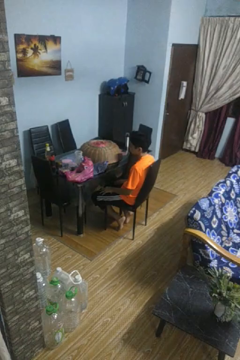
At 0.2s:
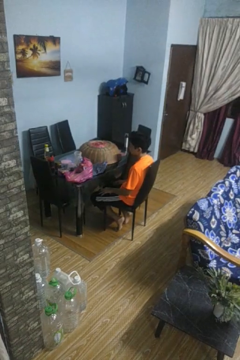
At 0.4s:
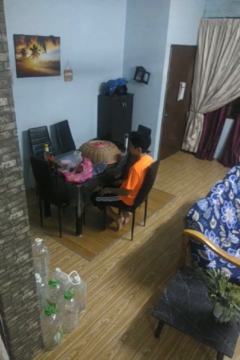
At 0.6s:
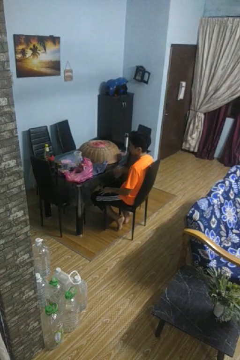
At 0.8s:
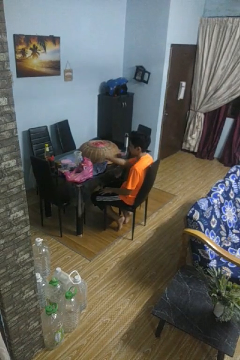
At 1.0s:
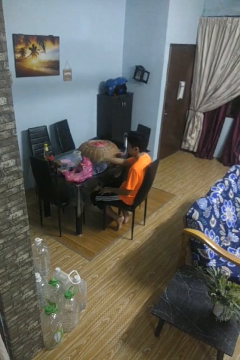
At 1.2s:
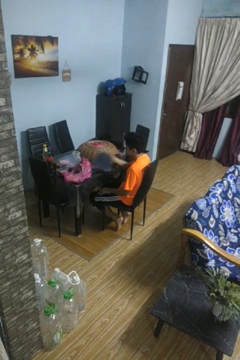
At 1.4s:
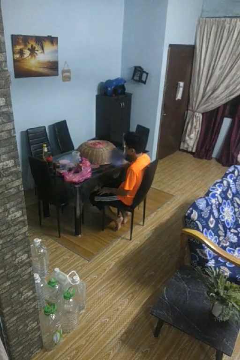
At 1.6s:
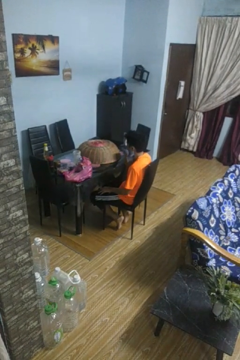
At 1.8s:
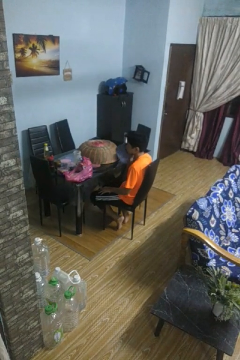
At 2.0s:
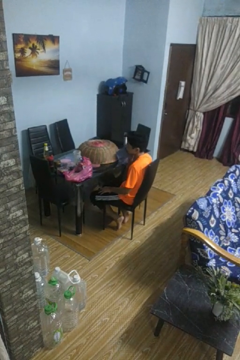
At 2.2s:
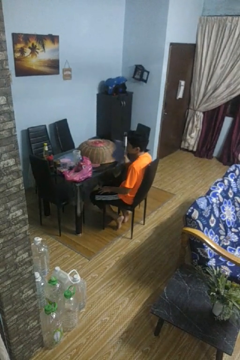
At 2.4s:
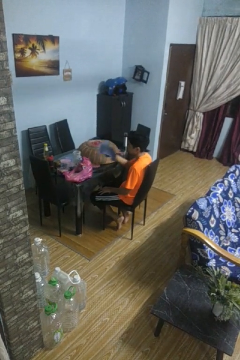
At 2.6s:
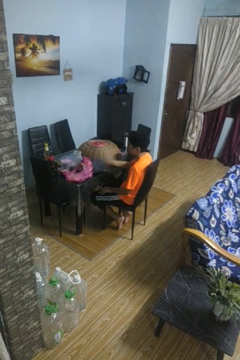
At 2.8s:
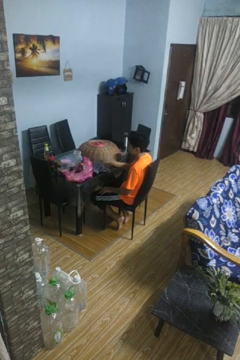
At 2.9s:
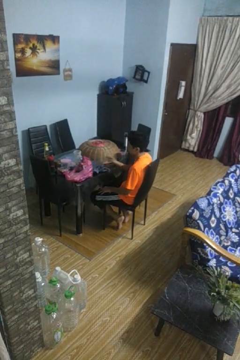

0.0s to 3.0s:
person wipes mouth with napkin

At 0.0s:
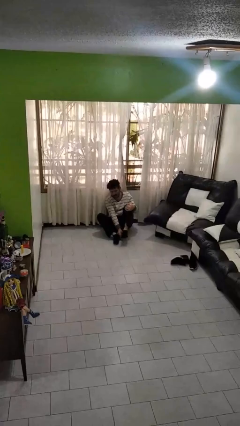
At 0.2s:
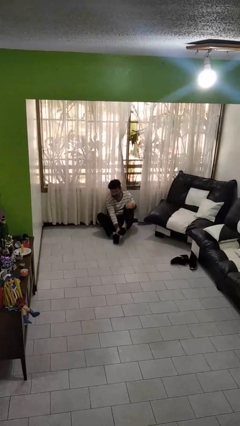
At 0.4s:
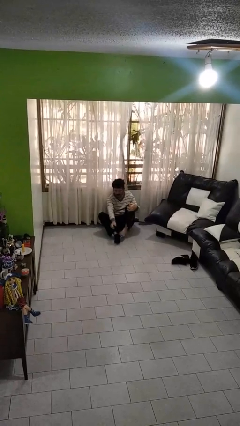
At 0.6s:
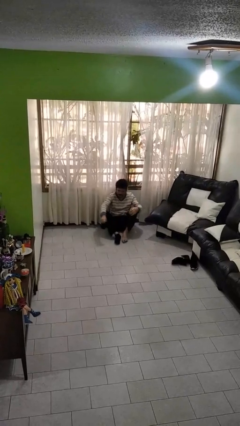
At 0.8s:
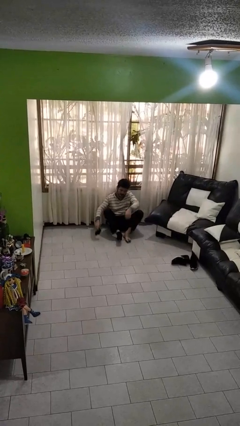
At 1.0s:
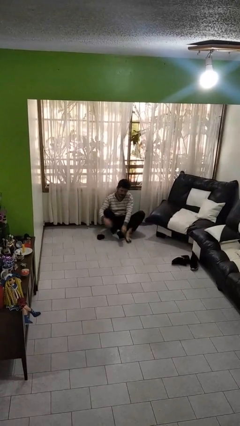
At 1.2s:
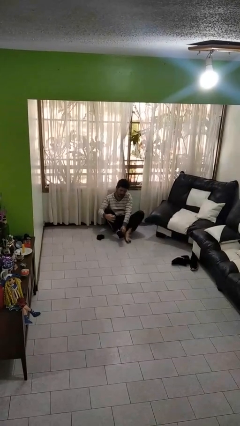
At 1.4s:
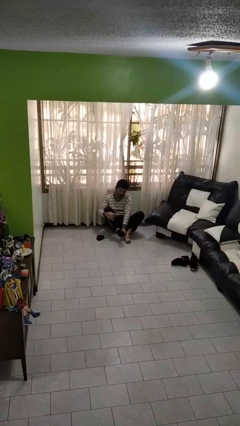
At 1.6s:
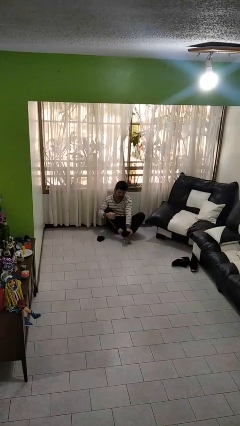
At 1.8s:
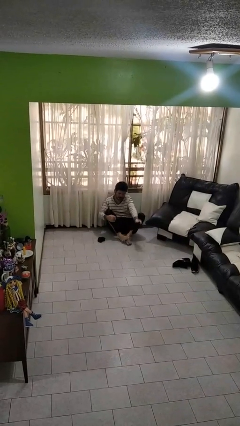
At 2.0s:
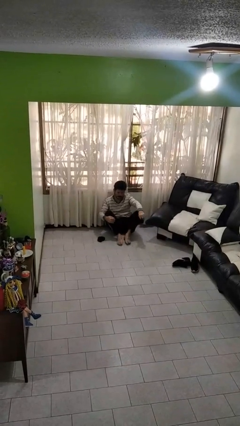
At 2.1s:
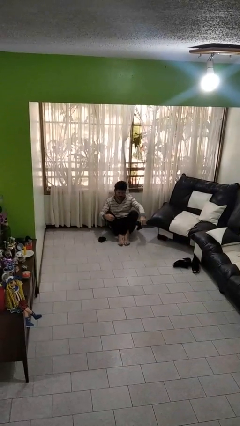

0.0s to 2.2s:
person takes off socks

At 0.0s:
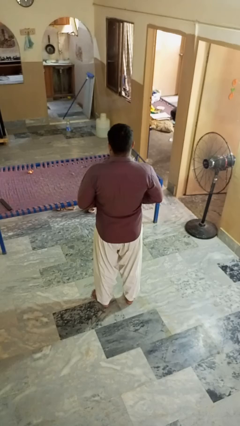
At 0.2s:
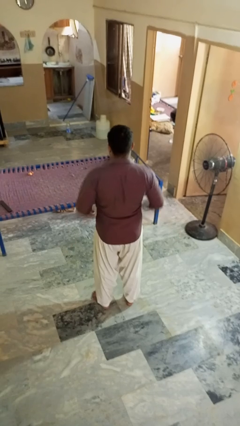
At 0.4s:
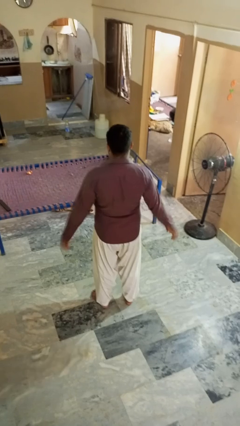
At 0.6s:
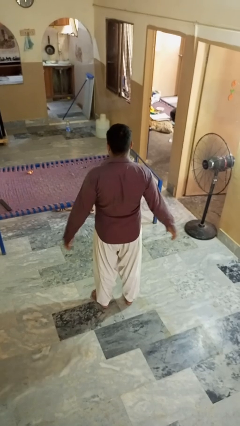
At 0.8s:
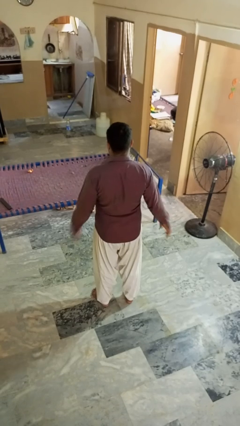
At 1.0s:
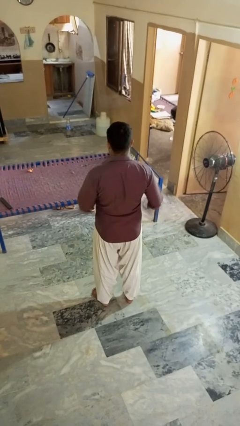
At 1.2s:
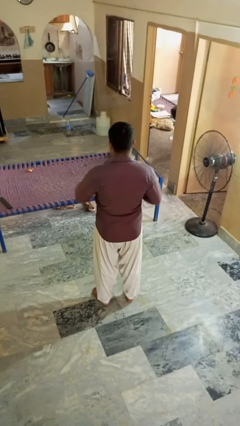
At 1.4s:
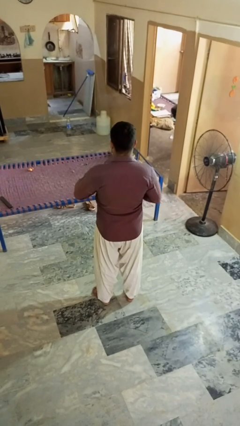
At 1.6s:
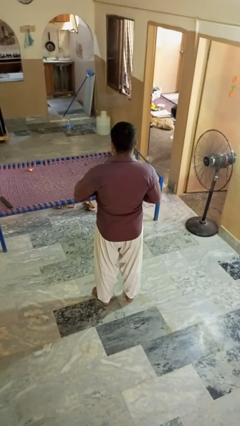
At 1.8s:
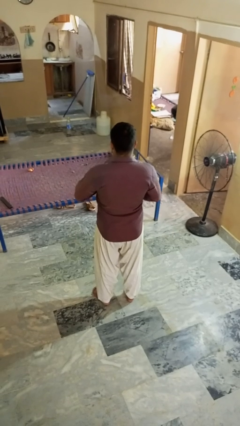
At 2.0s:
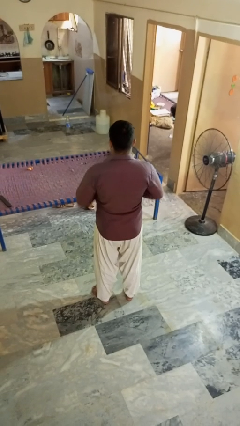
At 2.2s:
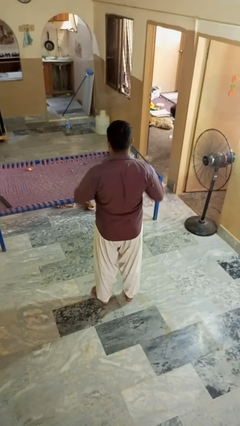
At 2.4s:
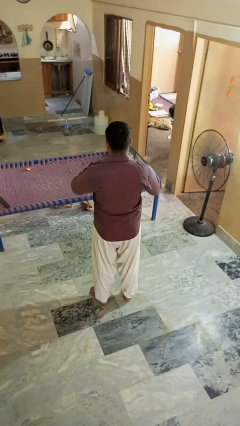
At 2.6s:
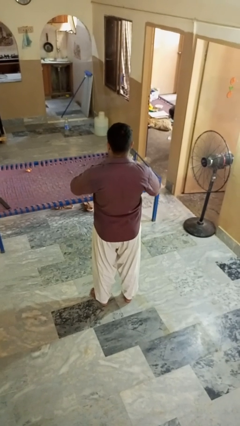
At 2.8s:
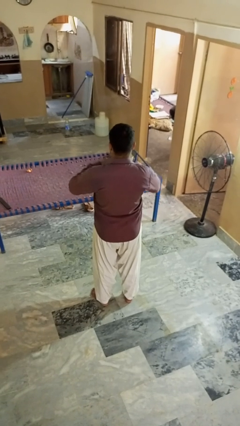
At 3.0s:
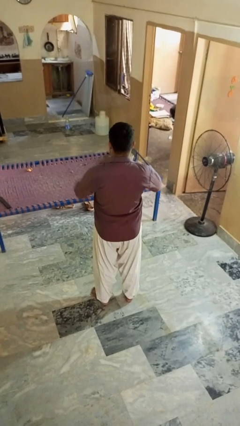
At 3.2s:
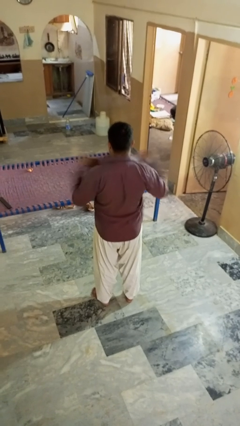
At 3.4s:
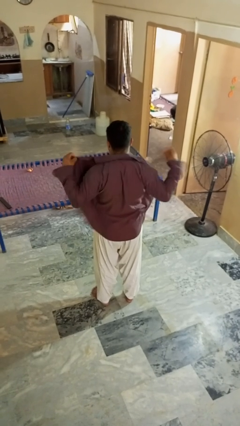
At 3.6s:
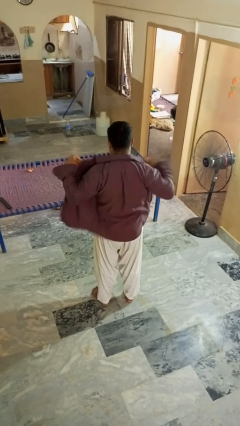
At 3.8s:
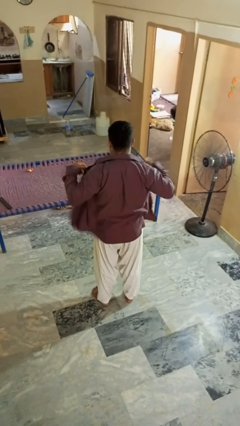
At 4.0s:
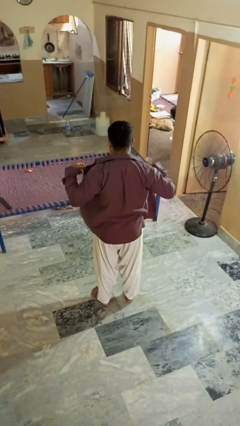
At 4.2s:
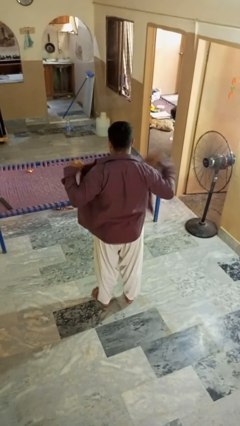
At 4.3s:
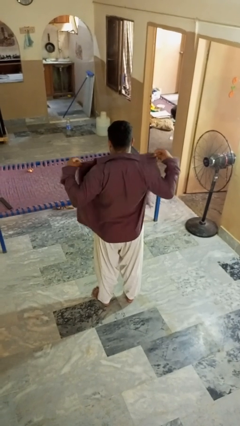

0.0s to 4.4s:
person unbuttons shirt

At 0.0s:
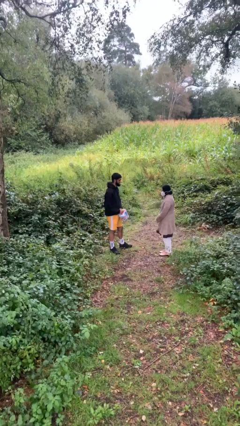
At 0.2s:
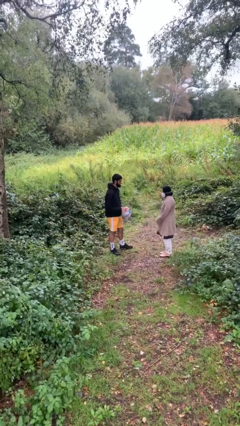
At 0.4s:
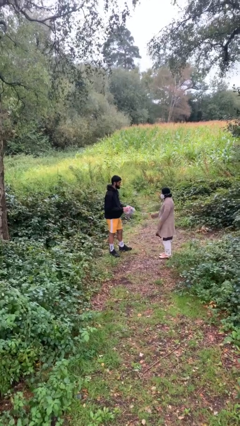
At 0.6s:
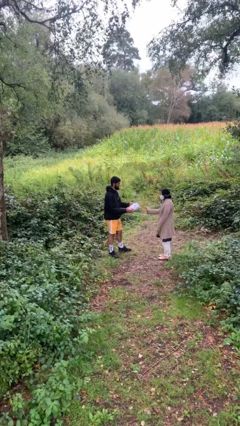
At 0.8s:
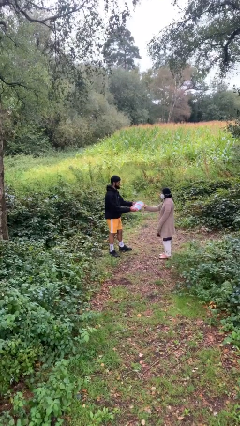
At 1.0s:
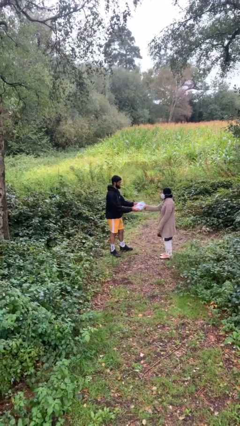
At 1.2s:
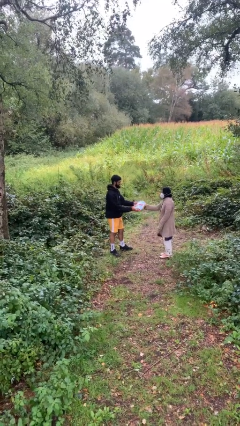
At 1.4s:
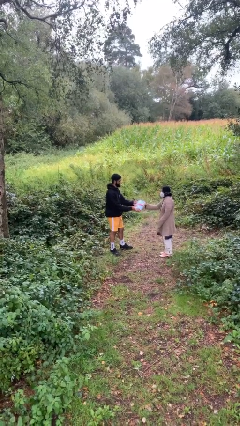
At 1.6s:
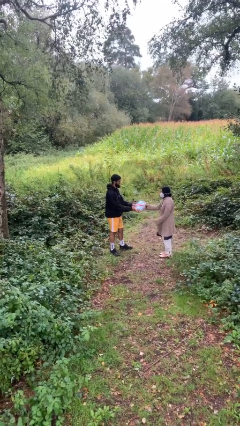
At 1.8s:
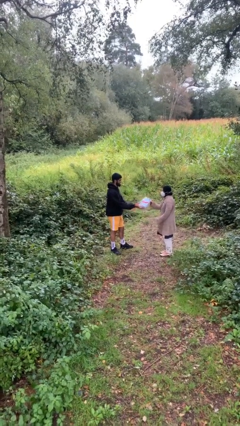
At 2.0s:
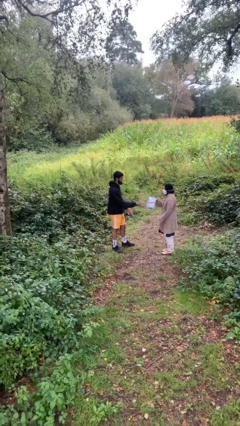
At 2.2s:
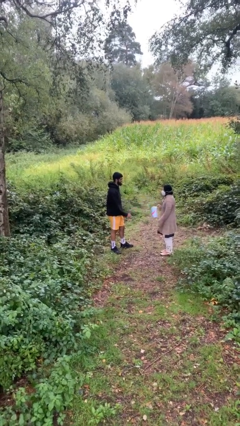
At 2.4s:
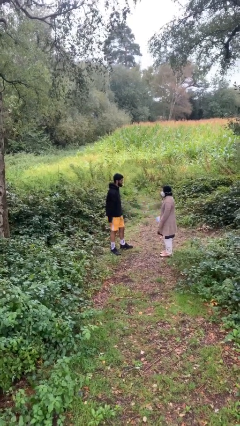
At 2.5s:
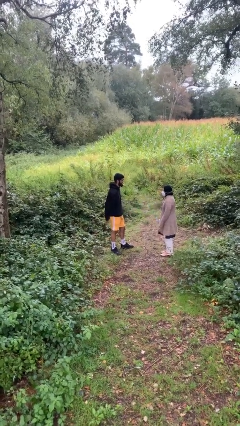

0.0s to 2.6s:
person transfers object to person

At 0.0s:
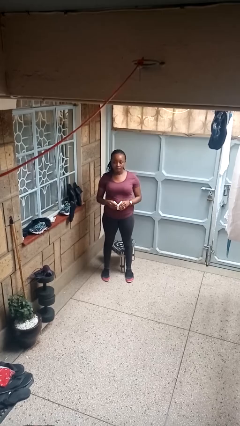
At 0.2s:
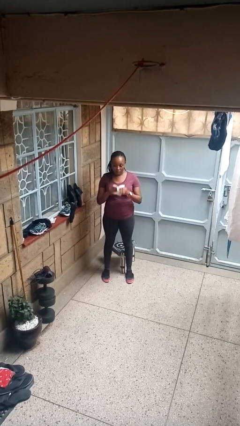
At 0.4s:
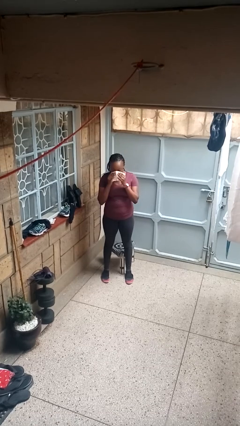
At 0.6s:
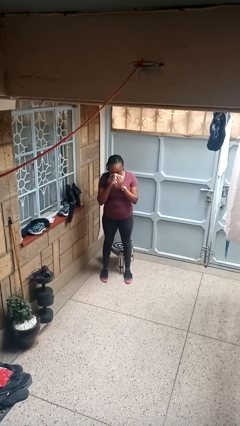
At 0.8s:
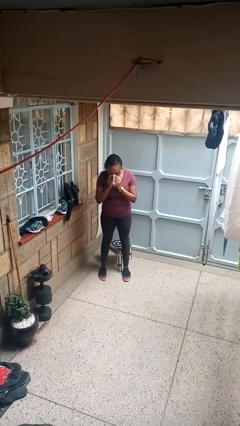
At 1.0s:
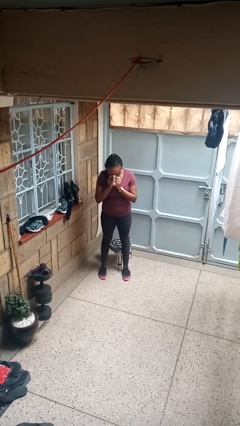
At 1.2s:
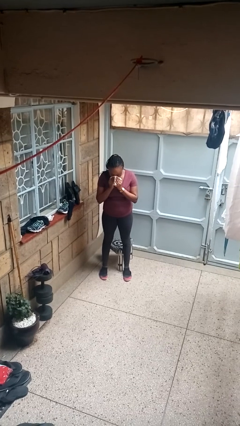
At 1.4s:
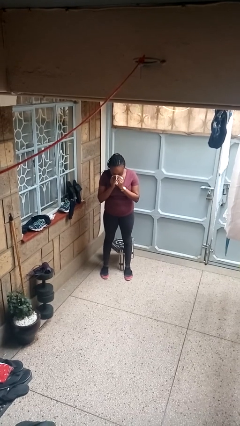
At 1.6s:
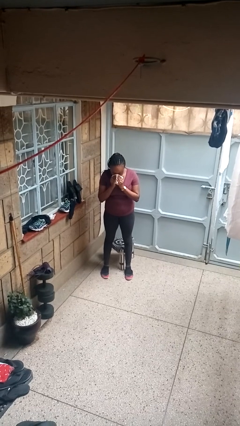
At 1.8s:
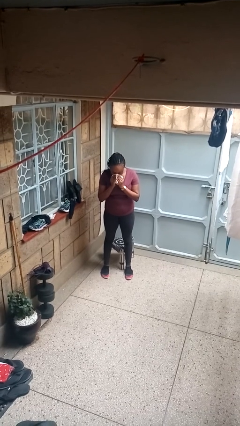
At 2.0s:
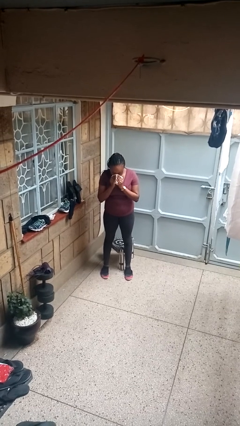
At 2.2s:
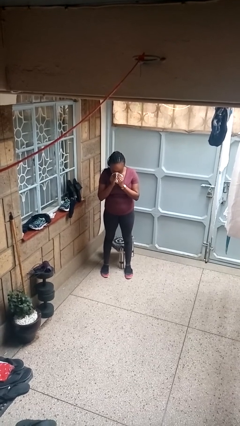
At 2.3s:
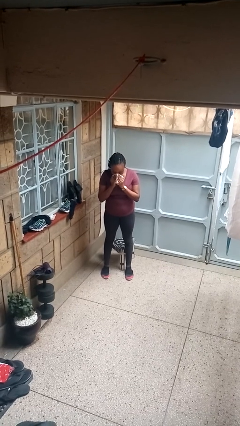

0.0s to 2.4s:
person blows nose

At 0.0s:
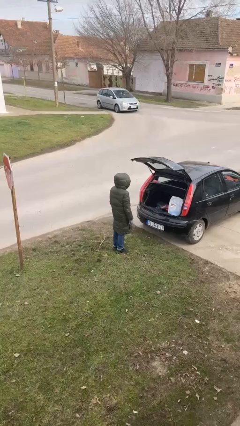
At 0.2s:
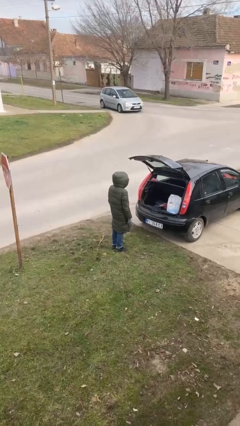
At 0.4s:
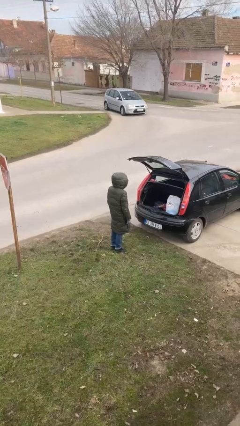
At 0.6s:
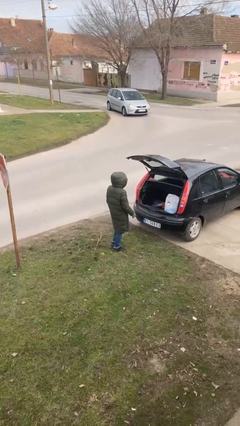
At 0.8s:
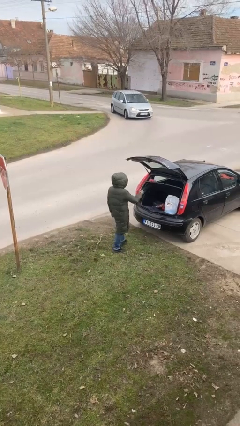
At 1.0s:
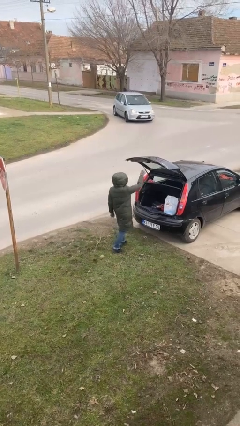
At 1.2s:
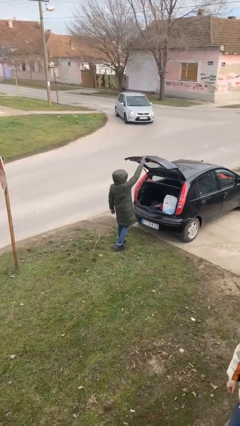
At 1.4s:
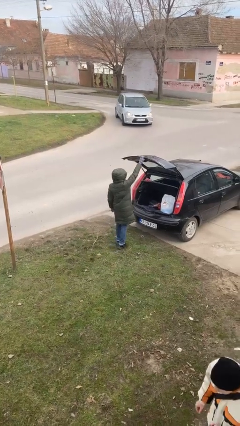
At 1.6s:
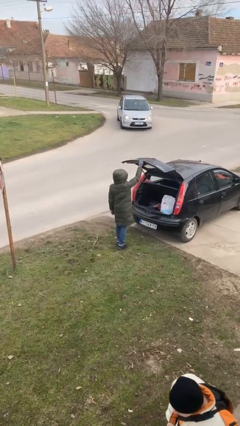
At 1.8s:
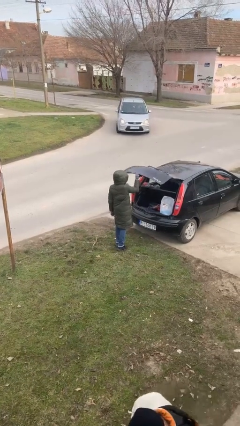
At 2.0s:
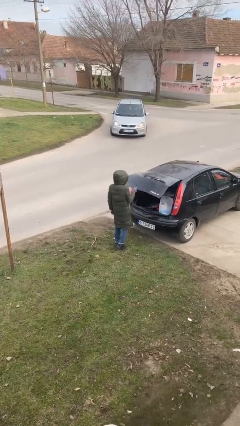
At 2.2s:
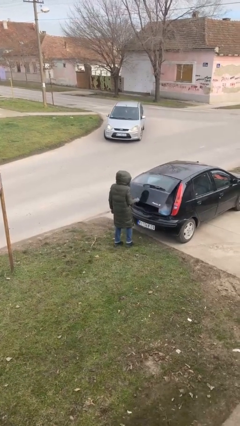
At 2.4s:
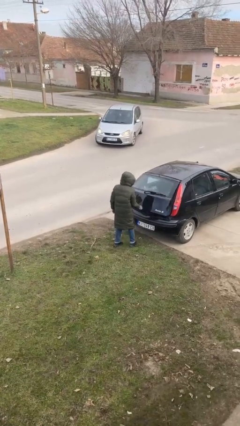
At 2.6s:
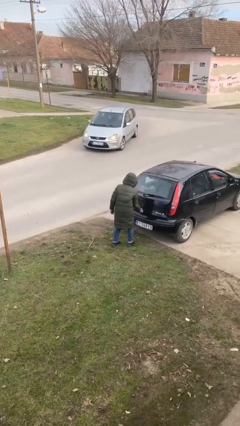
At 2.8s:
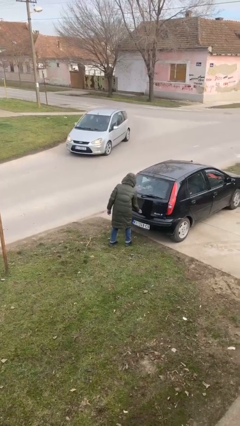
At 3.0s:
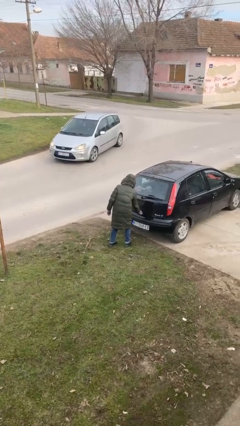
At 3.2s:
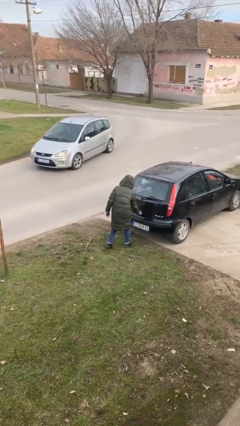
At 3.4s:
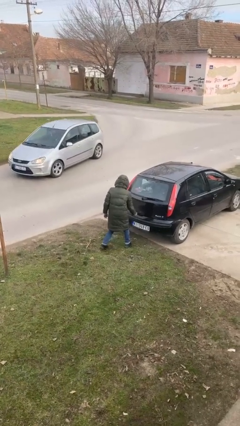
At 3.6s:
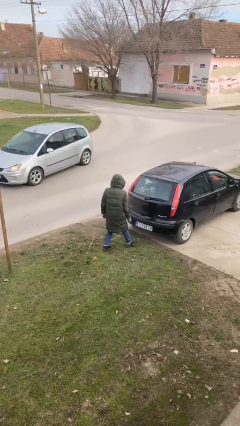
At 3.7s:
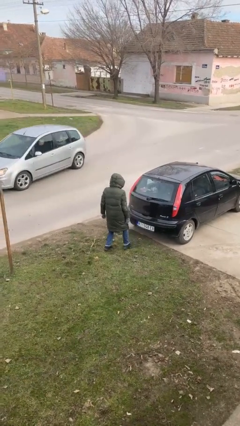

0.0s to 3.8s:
person closes car trunk
